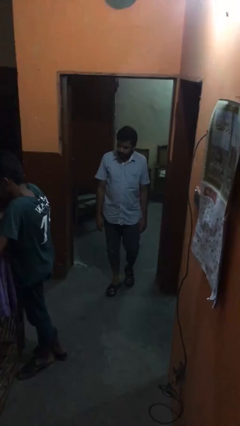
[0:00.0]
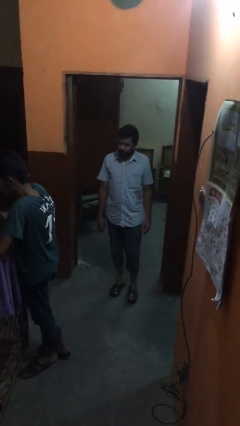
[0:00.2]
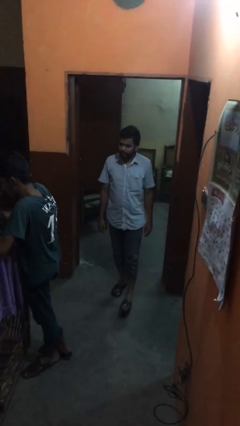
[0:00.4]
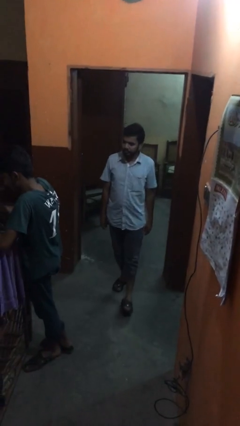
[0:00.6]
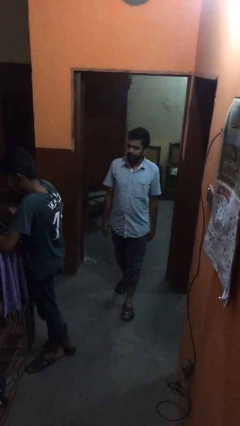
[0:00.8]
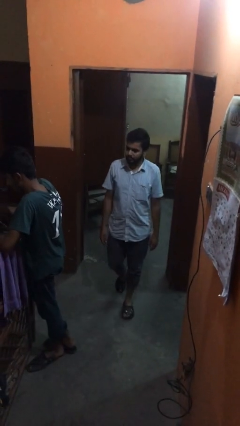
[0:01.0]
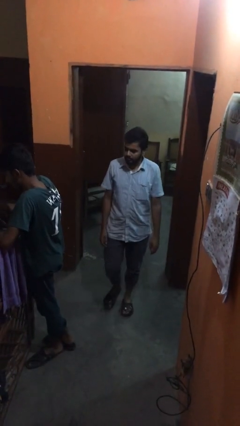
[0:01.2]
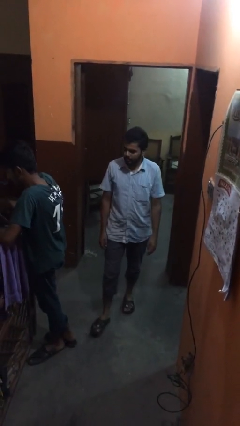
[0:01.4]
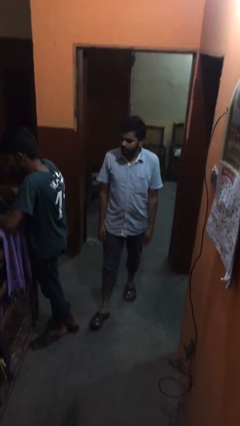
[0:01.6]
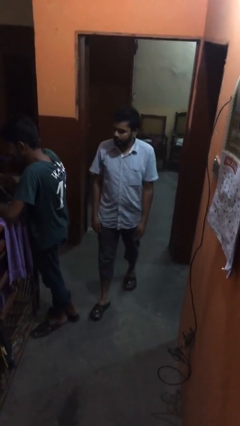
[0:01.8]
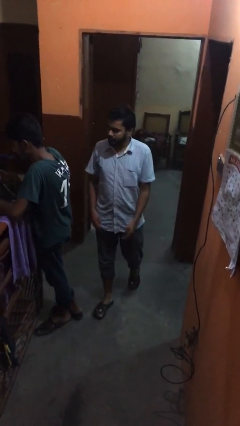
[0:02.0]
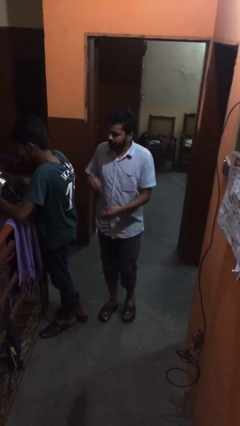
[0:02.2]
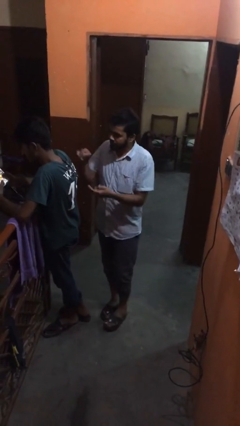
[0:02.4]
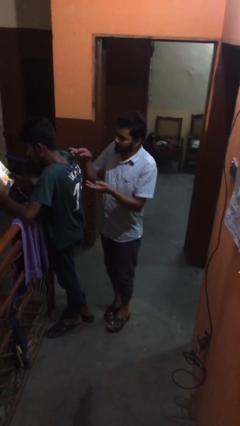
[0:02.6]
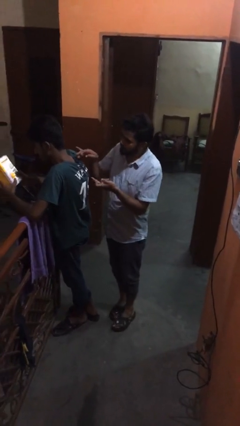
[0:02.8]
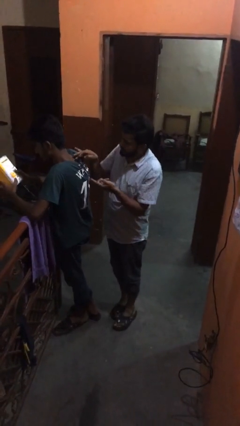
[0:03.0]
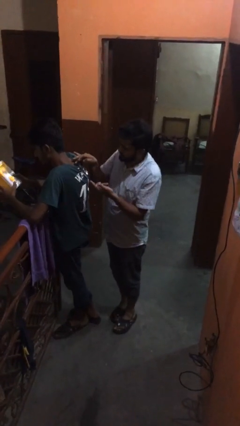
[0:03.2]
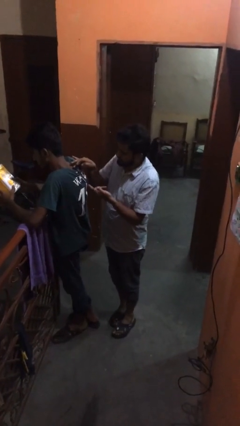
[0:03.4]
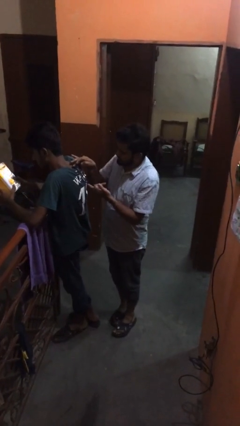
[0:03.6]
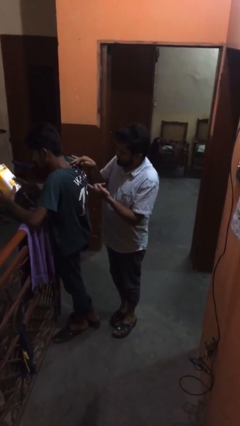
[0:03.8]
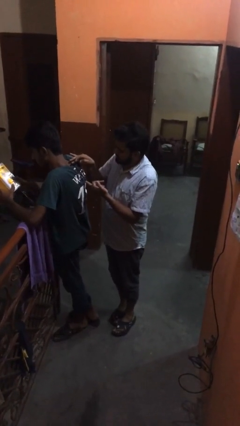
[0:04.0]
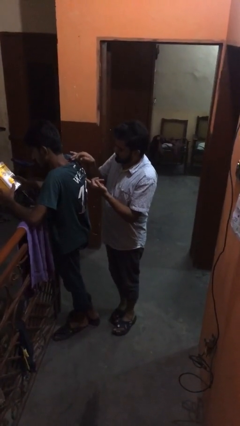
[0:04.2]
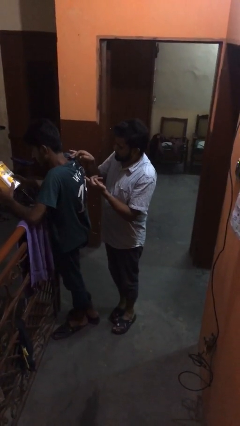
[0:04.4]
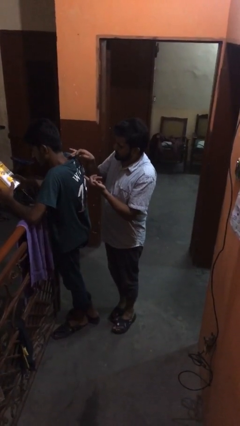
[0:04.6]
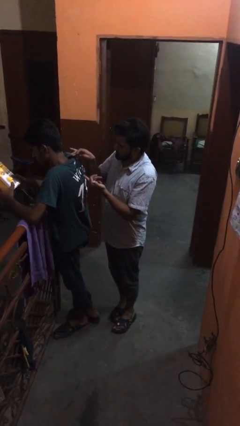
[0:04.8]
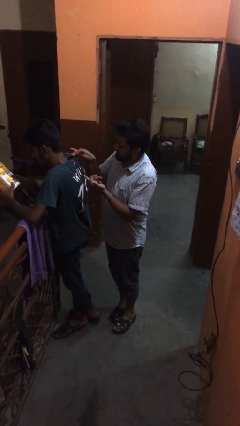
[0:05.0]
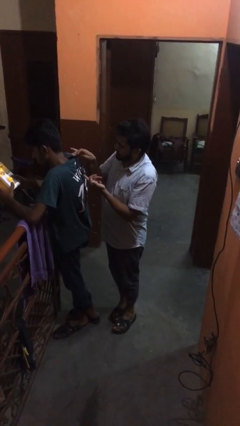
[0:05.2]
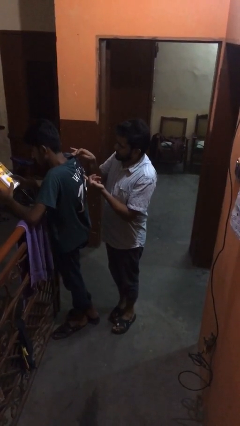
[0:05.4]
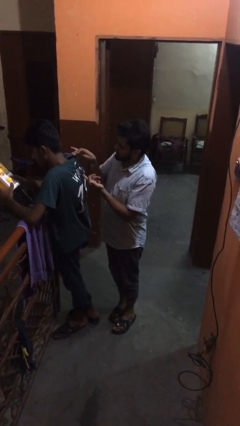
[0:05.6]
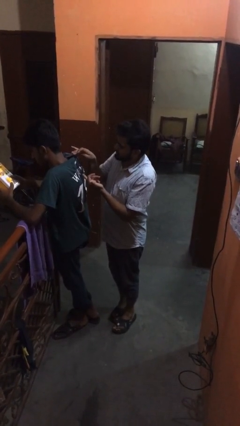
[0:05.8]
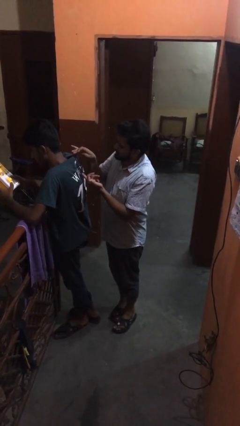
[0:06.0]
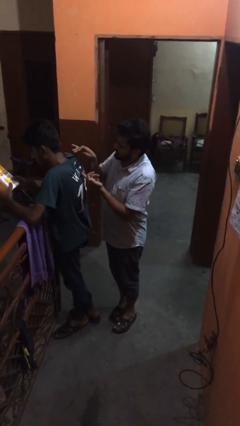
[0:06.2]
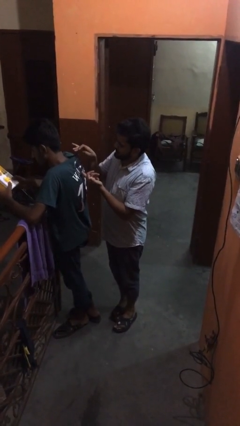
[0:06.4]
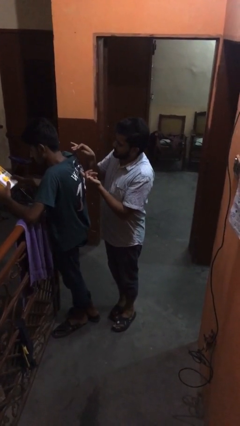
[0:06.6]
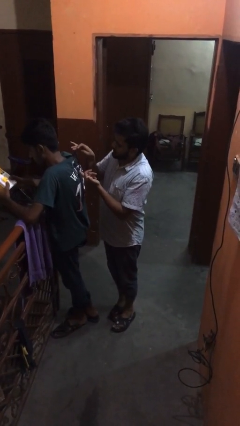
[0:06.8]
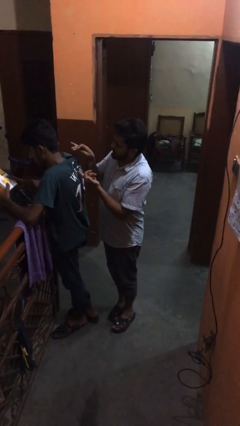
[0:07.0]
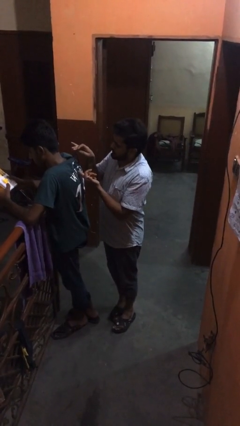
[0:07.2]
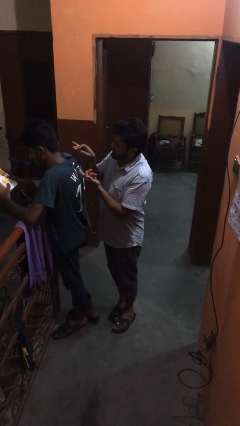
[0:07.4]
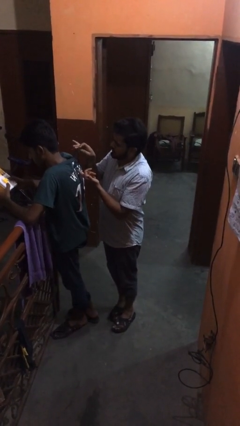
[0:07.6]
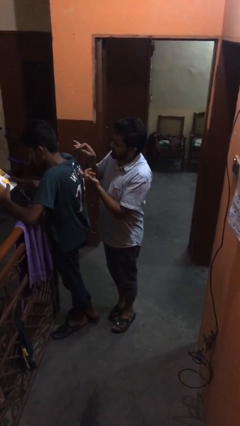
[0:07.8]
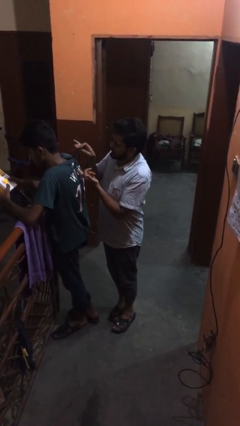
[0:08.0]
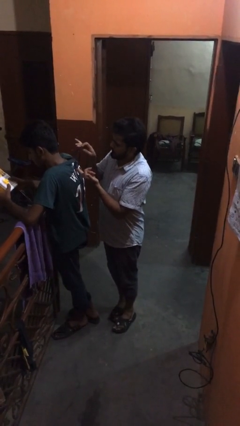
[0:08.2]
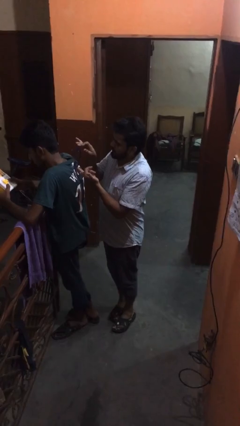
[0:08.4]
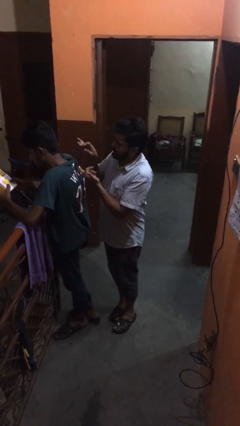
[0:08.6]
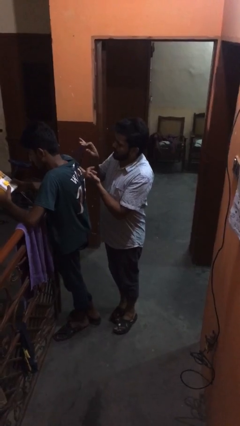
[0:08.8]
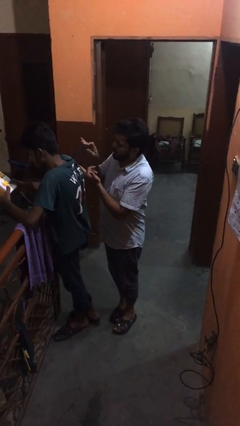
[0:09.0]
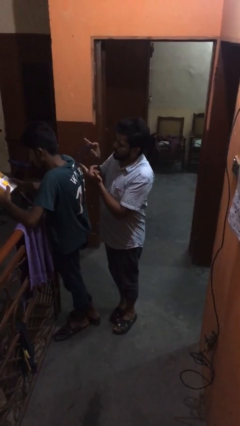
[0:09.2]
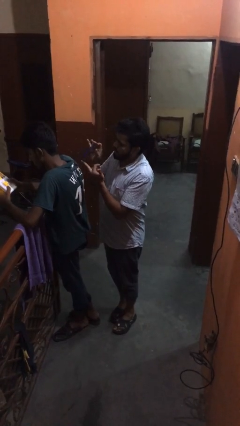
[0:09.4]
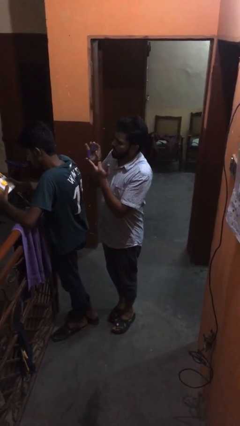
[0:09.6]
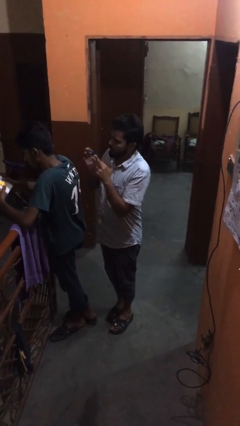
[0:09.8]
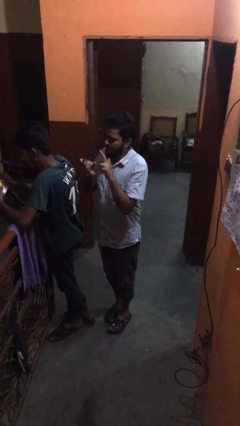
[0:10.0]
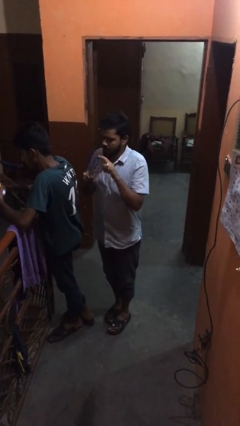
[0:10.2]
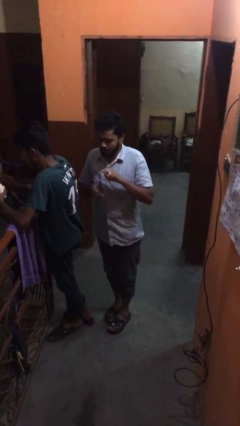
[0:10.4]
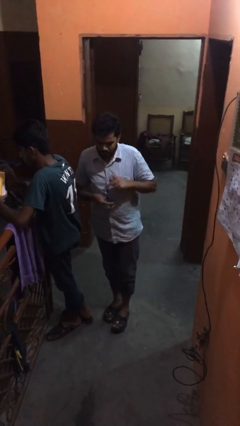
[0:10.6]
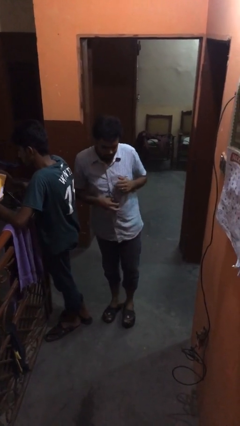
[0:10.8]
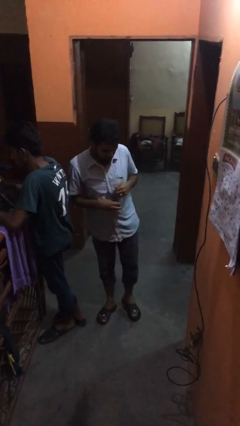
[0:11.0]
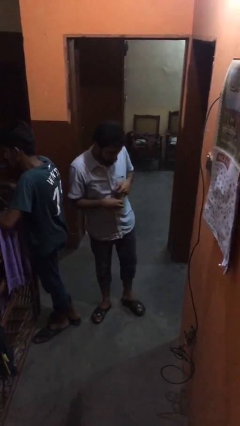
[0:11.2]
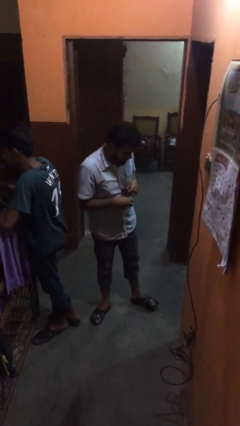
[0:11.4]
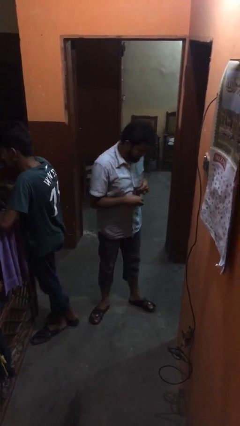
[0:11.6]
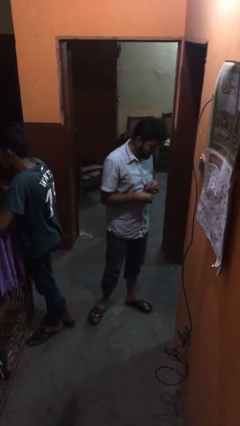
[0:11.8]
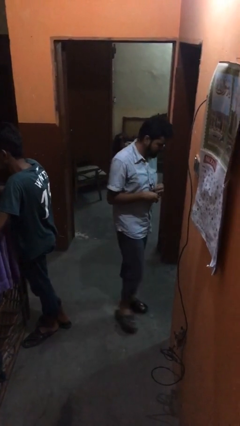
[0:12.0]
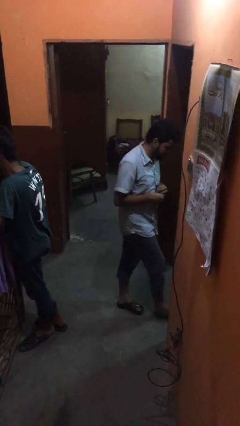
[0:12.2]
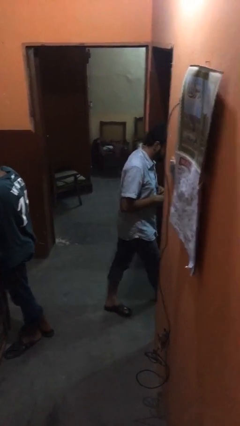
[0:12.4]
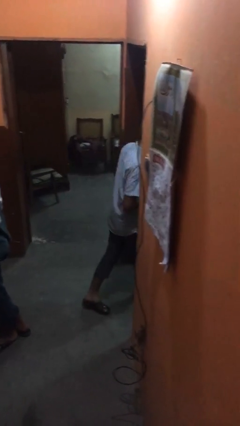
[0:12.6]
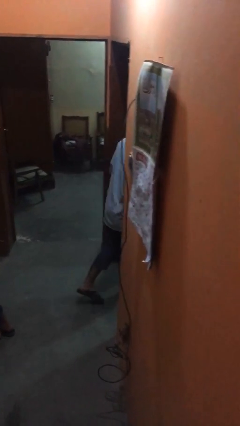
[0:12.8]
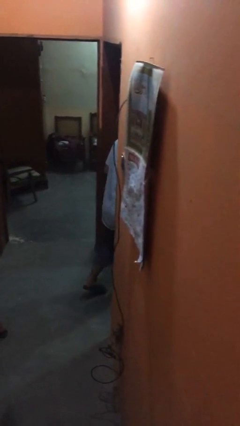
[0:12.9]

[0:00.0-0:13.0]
person steals object from person

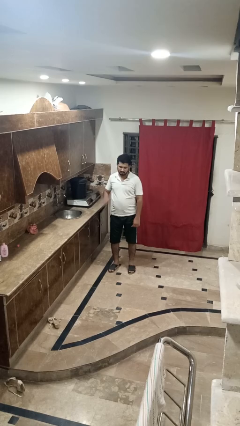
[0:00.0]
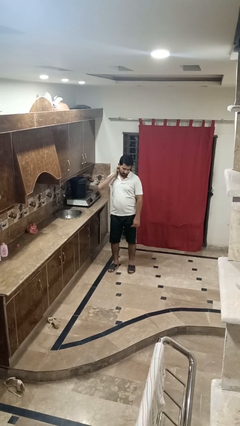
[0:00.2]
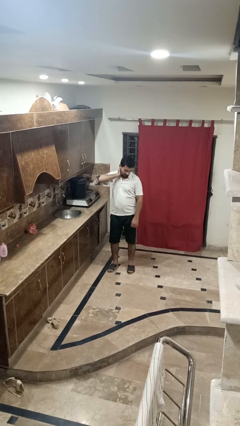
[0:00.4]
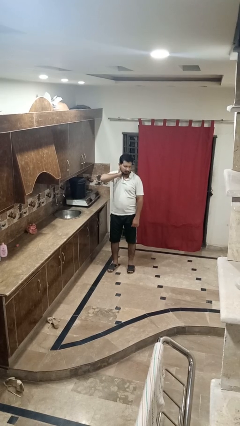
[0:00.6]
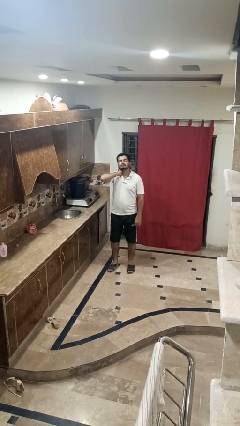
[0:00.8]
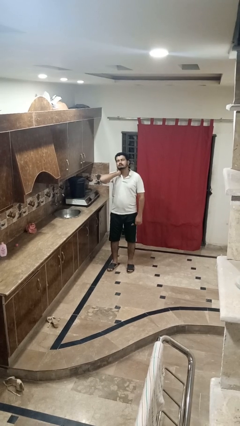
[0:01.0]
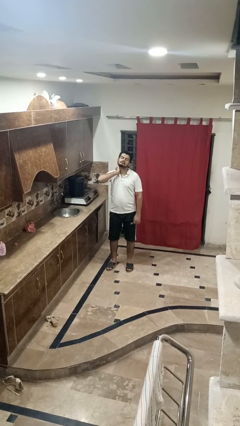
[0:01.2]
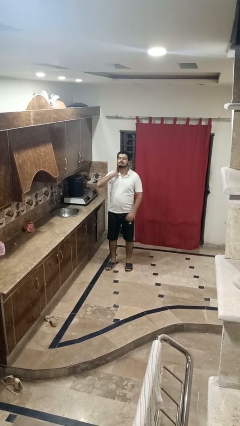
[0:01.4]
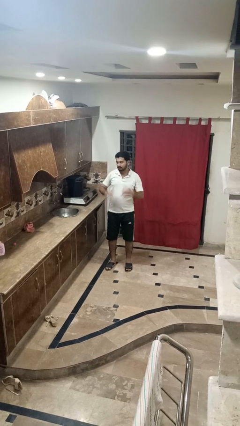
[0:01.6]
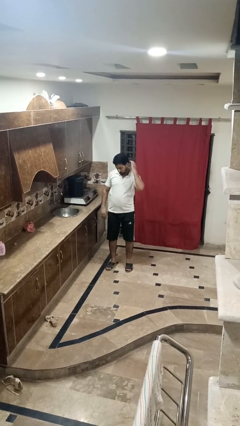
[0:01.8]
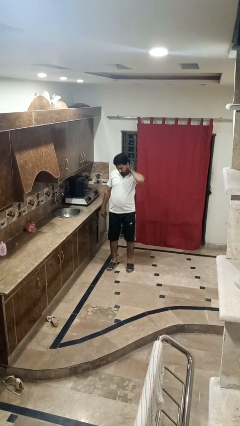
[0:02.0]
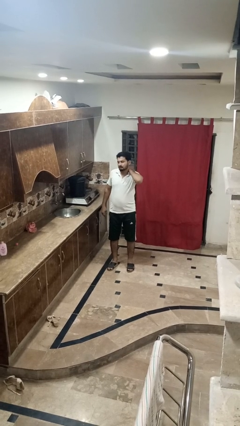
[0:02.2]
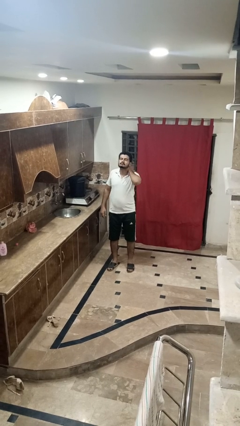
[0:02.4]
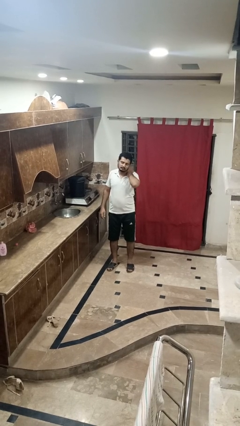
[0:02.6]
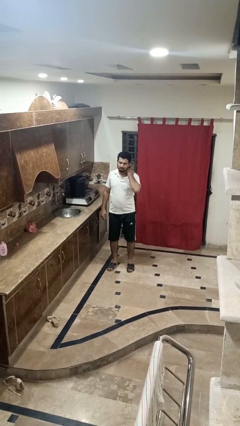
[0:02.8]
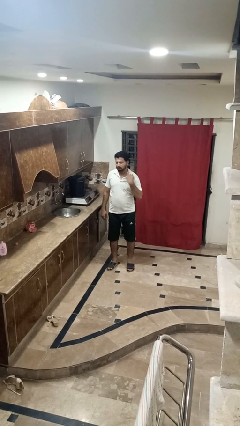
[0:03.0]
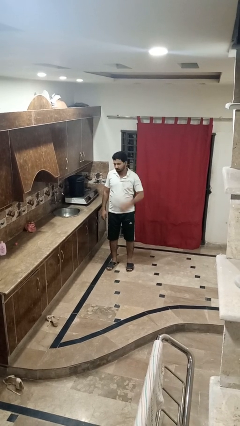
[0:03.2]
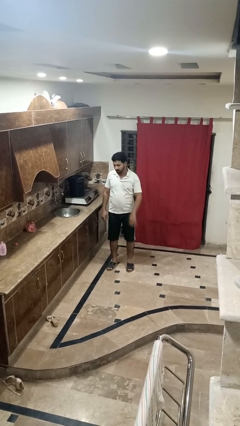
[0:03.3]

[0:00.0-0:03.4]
person rubs neck

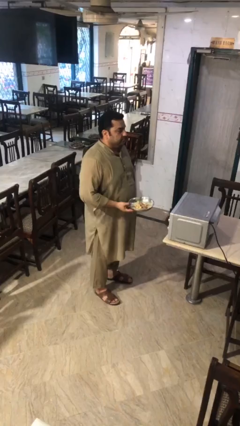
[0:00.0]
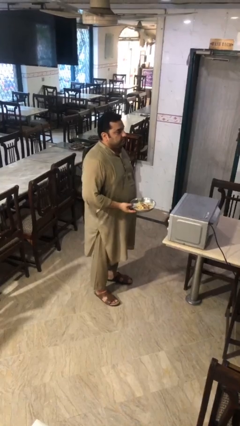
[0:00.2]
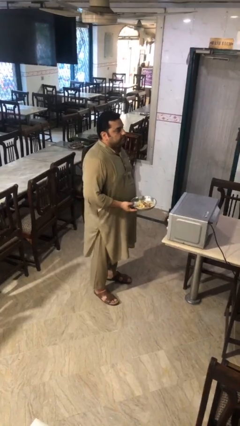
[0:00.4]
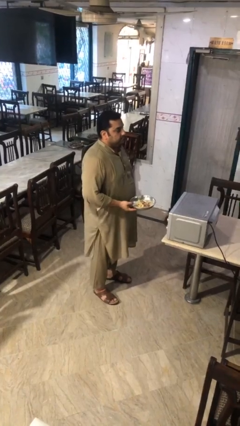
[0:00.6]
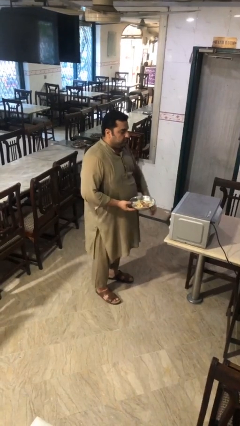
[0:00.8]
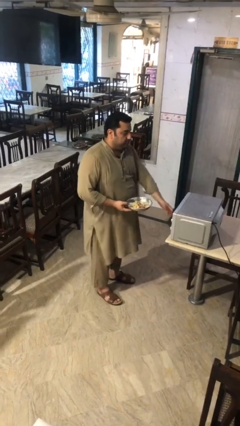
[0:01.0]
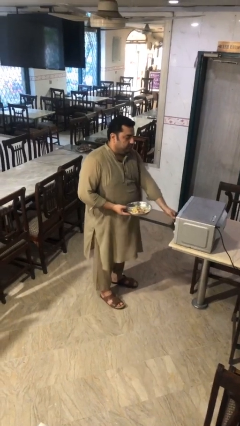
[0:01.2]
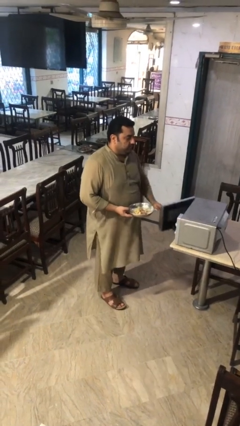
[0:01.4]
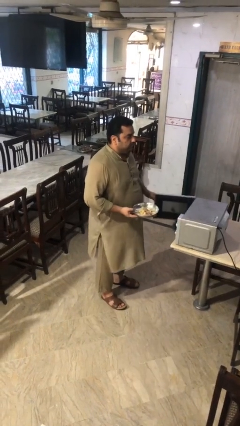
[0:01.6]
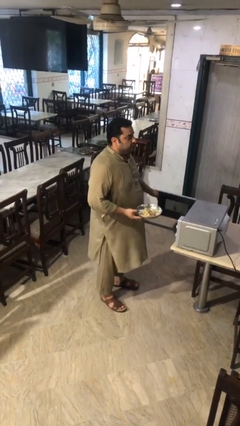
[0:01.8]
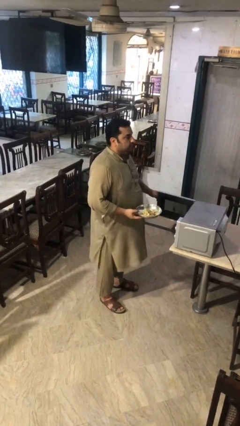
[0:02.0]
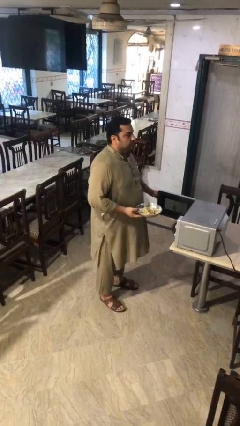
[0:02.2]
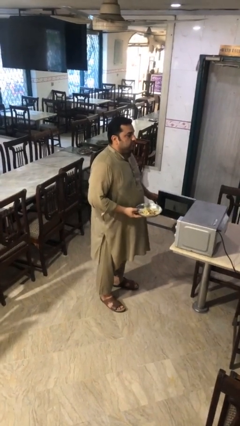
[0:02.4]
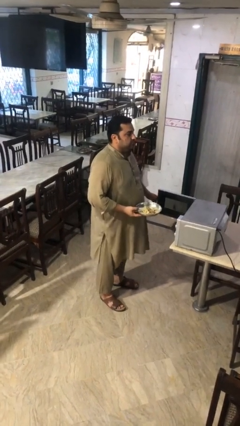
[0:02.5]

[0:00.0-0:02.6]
person opens microwave
